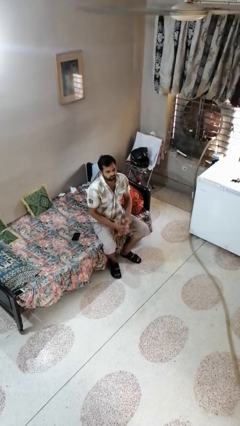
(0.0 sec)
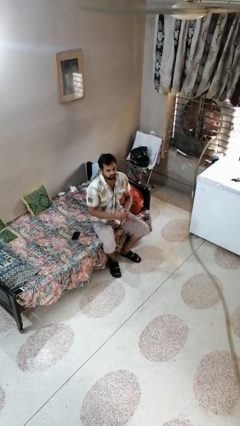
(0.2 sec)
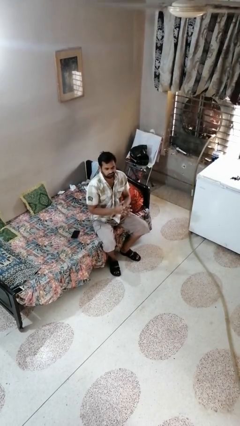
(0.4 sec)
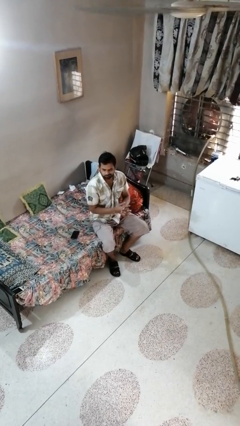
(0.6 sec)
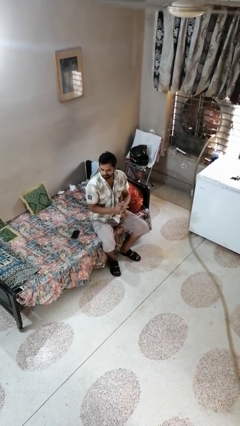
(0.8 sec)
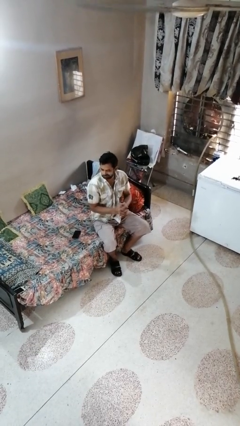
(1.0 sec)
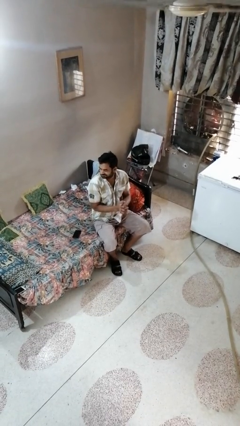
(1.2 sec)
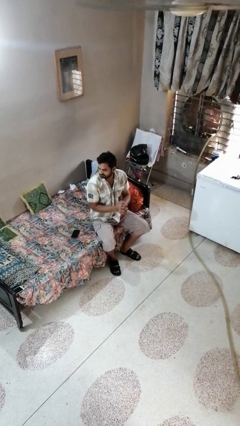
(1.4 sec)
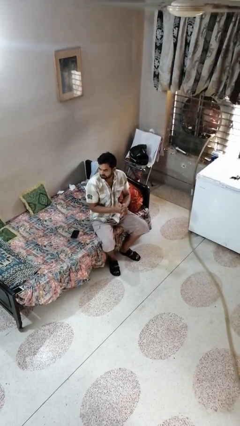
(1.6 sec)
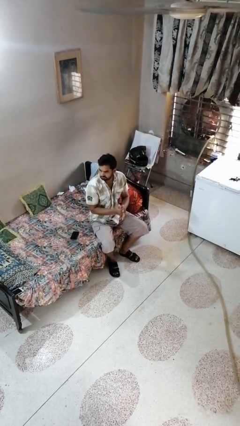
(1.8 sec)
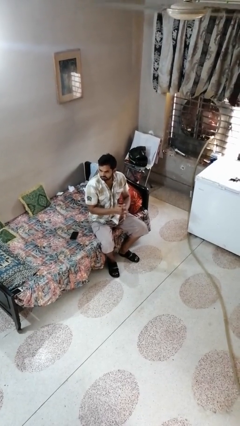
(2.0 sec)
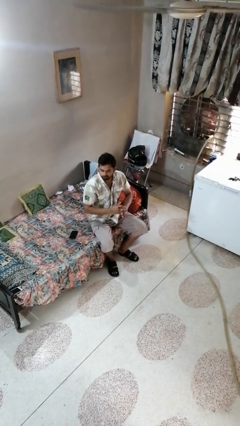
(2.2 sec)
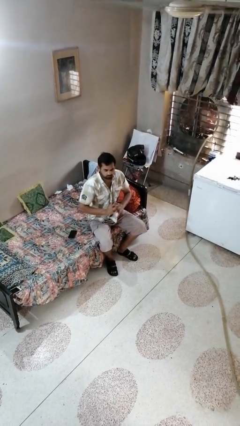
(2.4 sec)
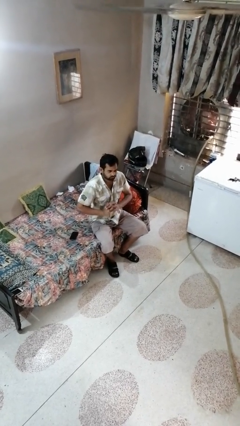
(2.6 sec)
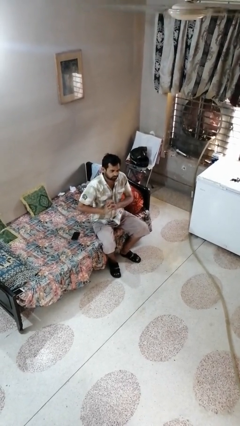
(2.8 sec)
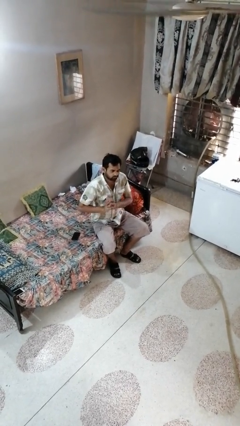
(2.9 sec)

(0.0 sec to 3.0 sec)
person cracks knuckles

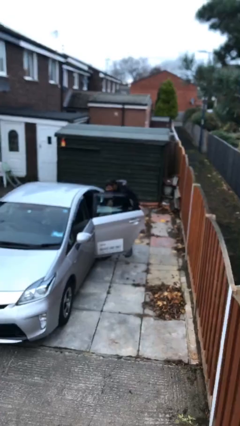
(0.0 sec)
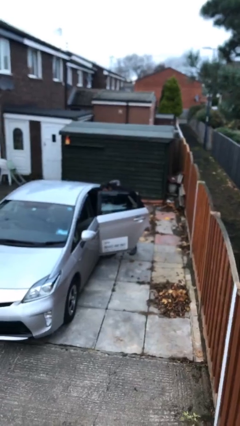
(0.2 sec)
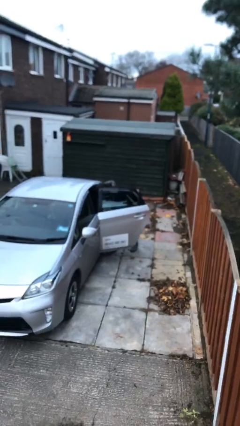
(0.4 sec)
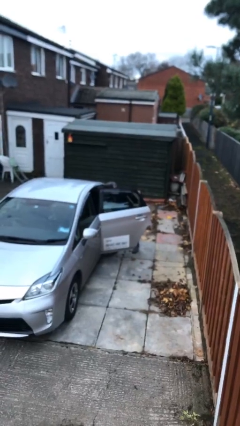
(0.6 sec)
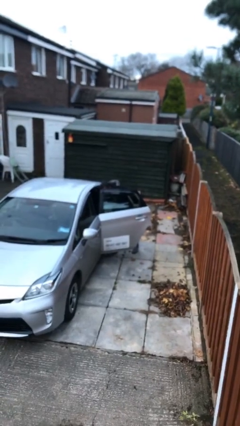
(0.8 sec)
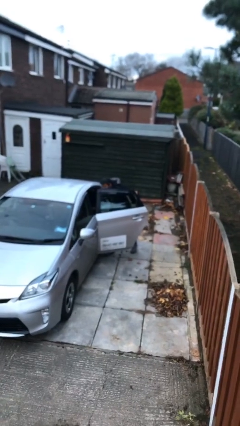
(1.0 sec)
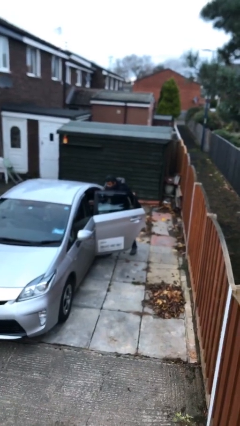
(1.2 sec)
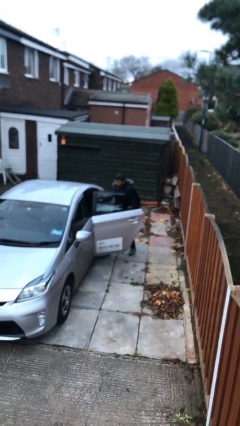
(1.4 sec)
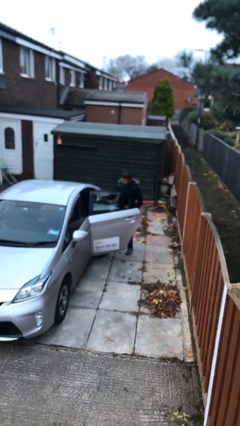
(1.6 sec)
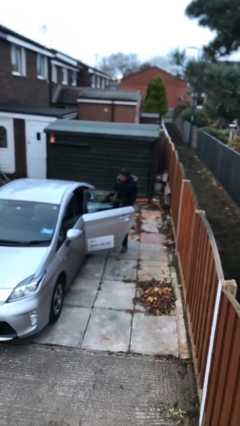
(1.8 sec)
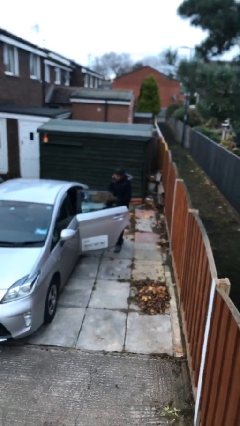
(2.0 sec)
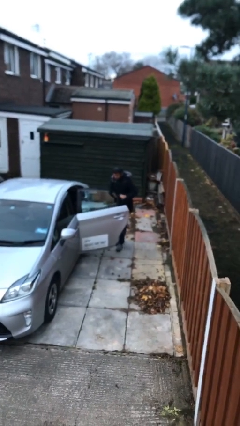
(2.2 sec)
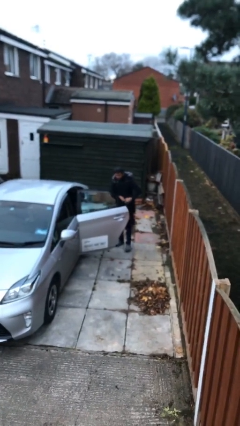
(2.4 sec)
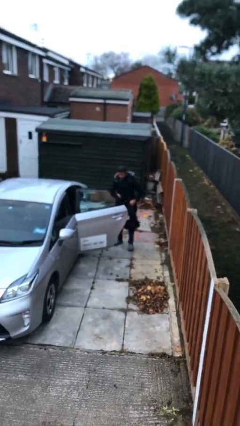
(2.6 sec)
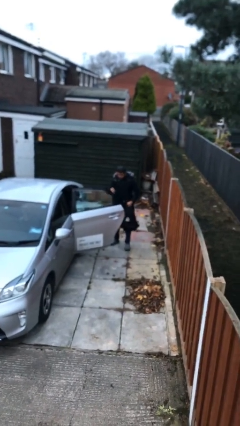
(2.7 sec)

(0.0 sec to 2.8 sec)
person unloads car

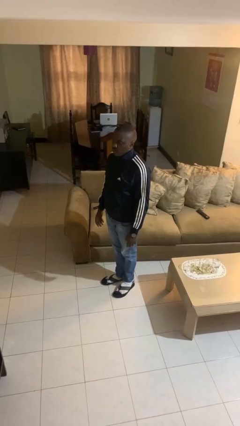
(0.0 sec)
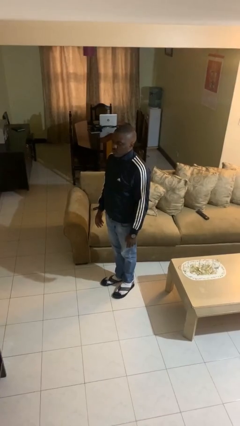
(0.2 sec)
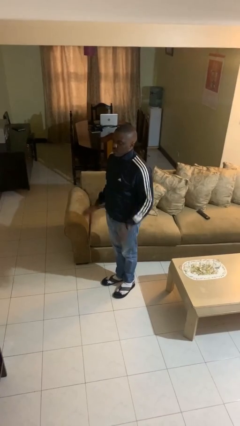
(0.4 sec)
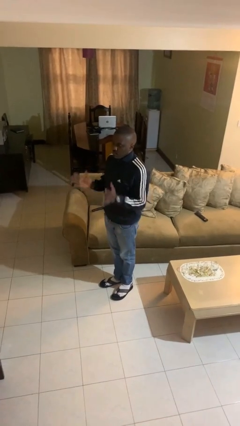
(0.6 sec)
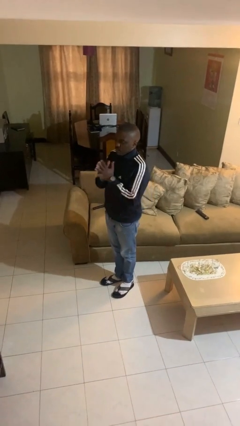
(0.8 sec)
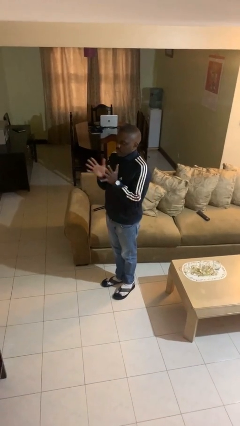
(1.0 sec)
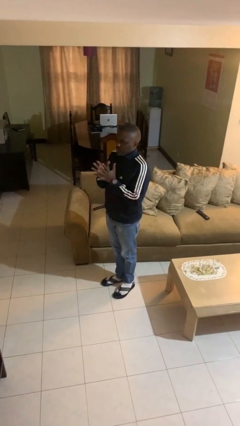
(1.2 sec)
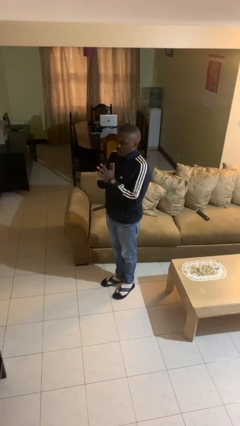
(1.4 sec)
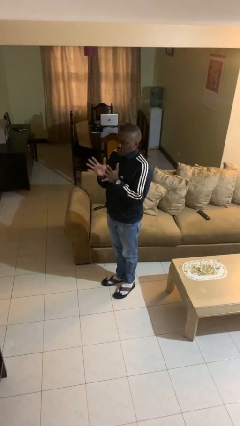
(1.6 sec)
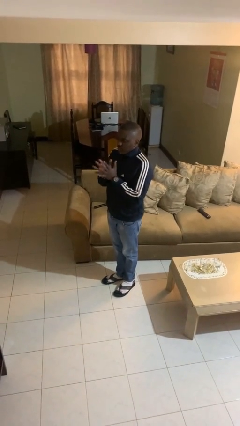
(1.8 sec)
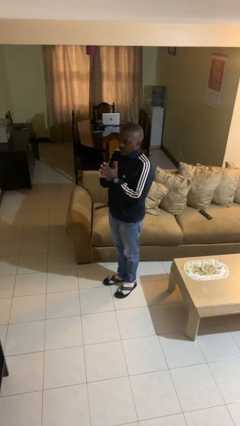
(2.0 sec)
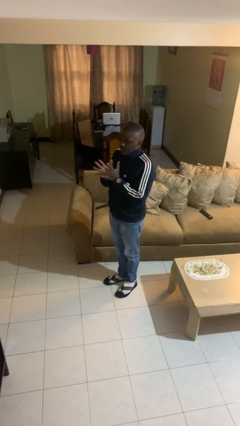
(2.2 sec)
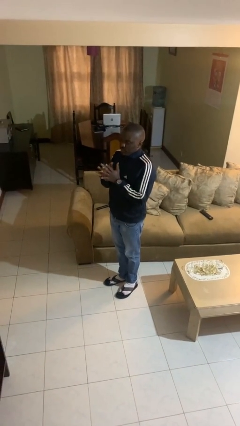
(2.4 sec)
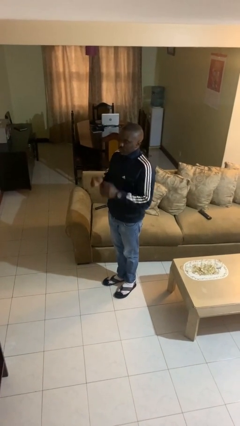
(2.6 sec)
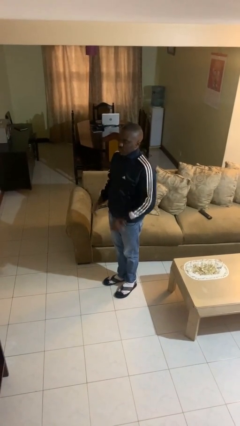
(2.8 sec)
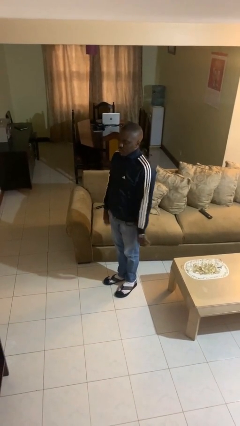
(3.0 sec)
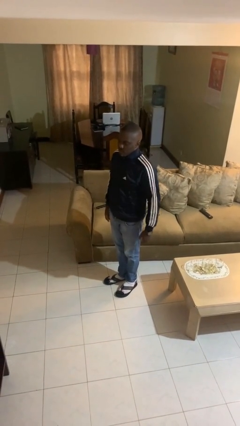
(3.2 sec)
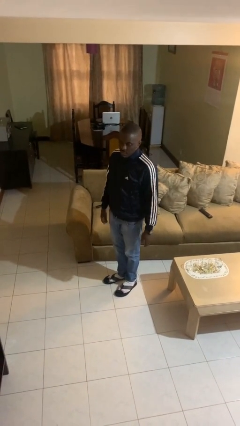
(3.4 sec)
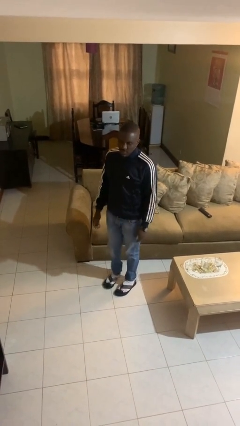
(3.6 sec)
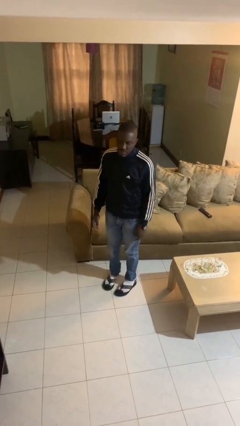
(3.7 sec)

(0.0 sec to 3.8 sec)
person claps hands

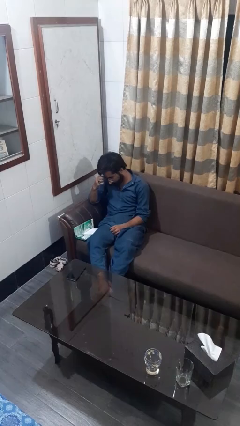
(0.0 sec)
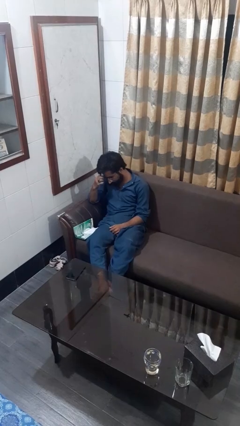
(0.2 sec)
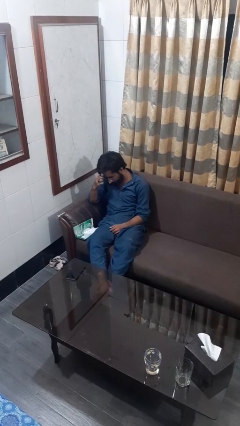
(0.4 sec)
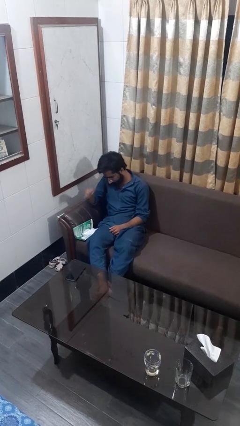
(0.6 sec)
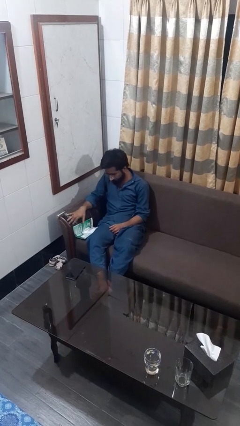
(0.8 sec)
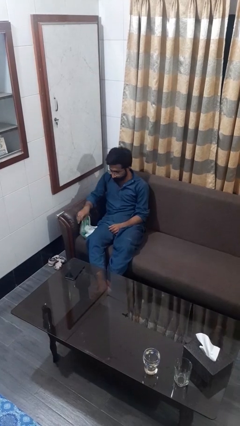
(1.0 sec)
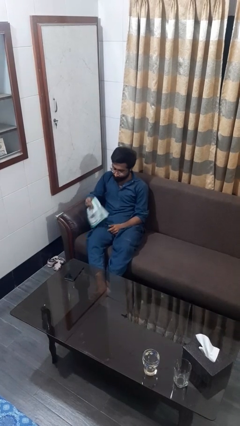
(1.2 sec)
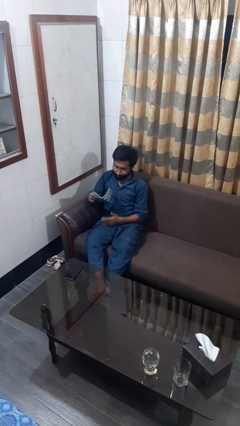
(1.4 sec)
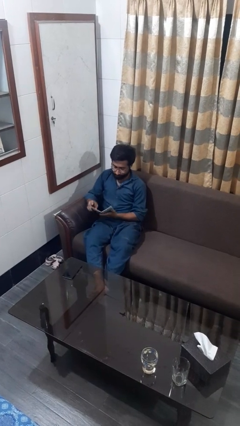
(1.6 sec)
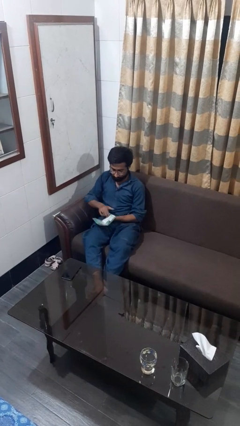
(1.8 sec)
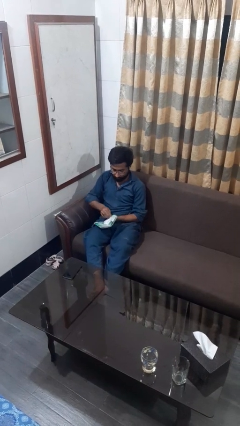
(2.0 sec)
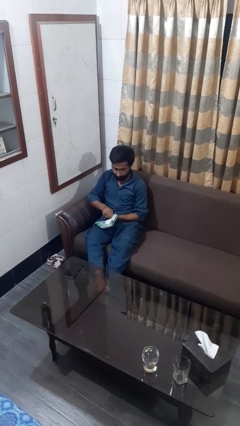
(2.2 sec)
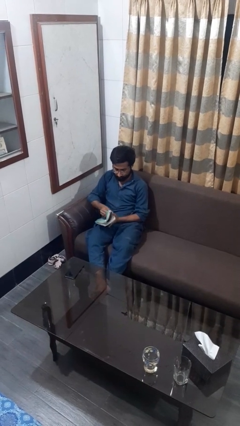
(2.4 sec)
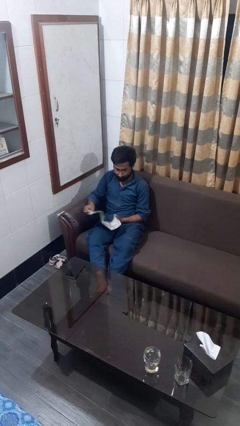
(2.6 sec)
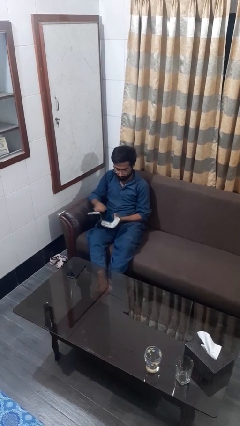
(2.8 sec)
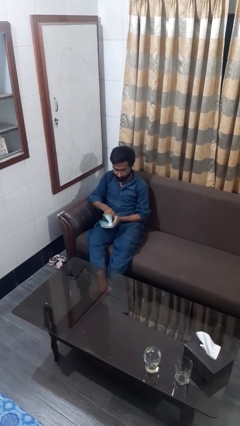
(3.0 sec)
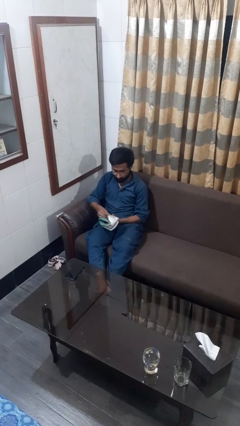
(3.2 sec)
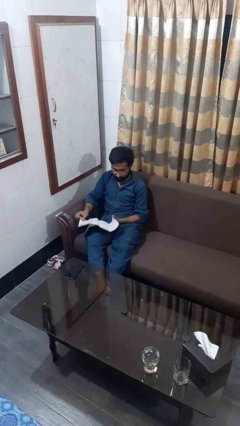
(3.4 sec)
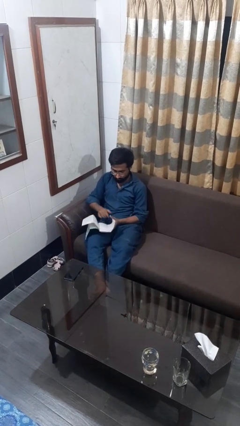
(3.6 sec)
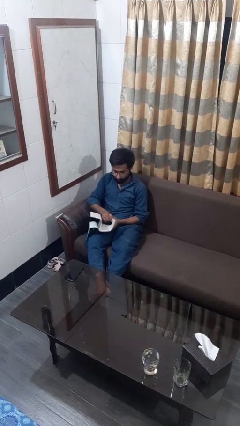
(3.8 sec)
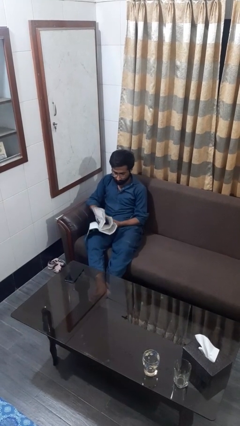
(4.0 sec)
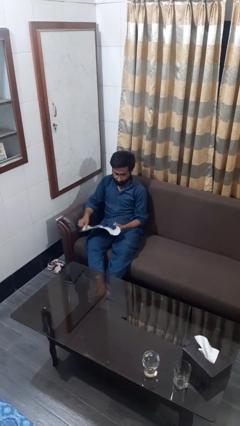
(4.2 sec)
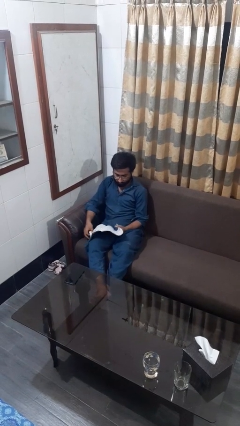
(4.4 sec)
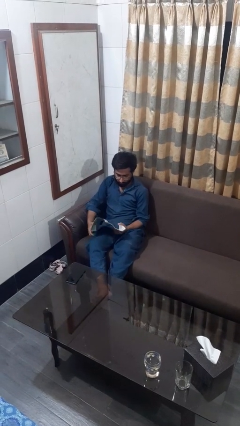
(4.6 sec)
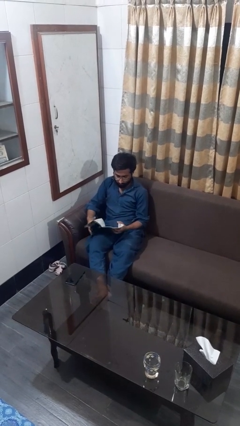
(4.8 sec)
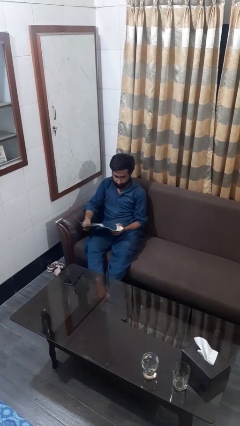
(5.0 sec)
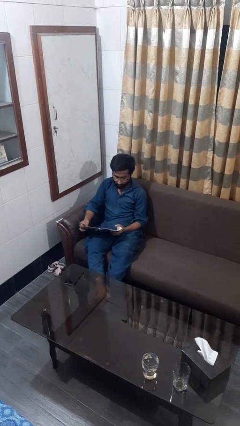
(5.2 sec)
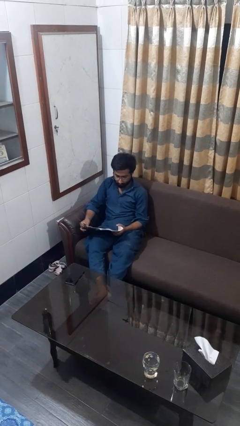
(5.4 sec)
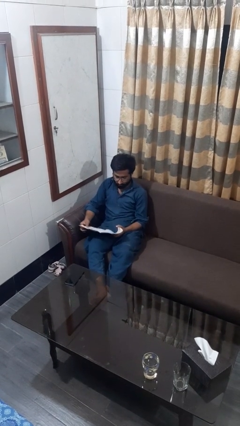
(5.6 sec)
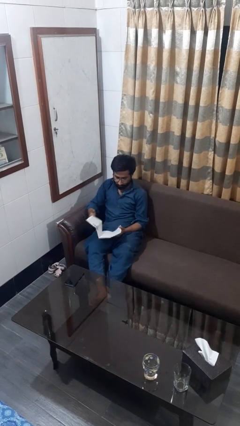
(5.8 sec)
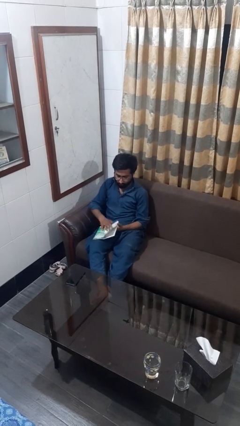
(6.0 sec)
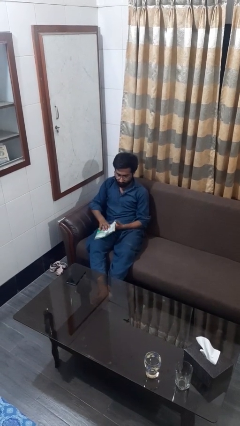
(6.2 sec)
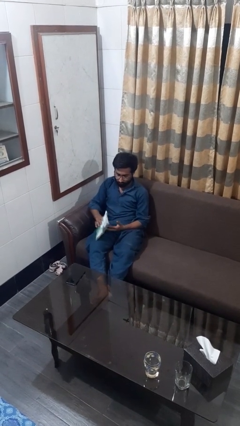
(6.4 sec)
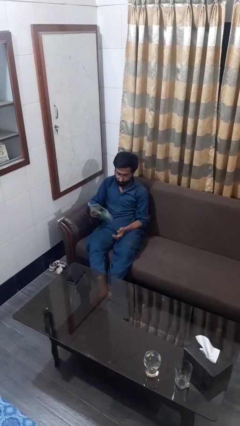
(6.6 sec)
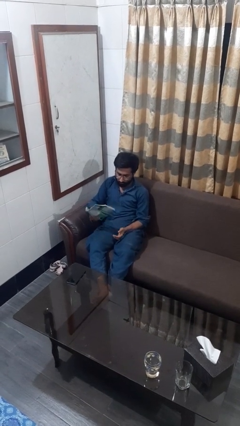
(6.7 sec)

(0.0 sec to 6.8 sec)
person reads magazine

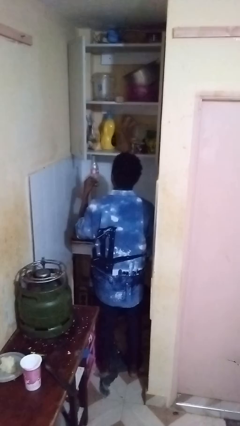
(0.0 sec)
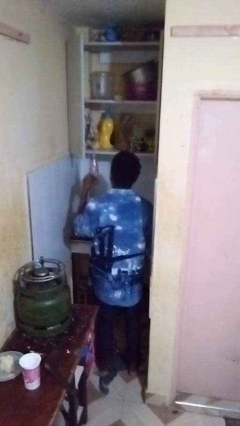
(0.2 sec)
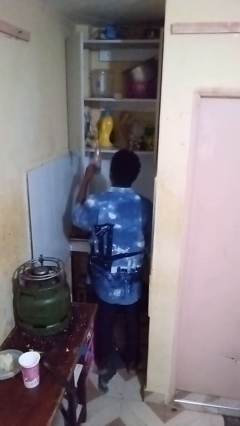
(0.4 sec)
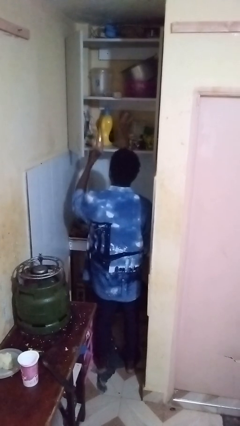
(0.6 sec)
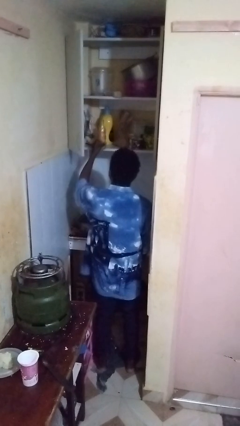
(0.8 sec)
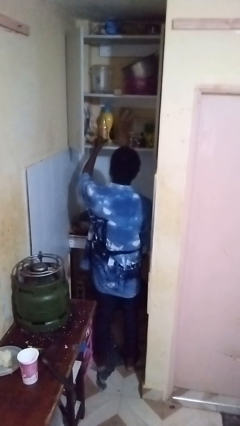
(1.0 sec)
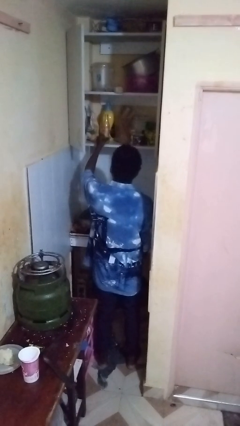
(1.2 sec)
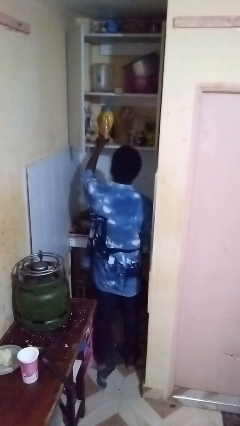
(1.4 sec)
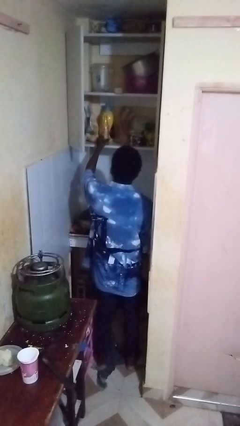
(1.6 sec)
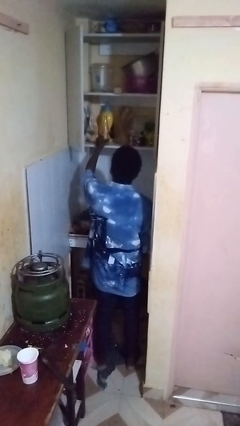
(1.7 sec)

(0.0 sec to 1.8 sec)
person puts down object into cabinet
